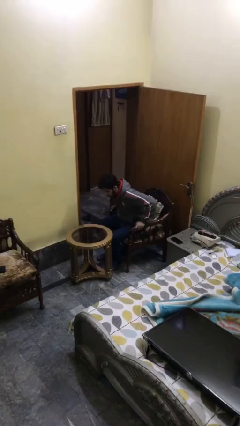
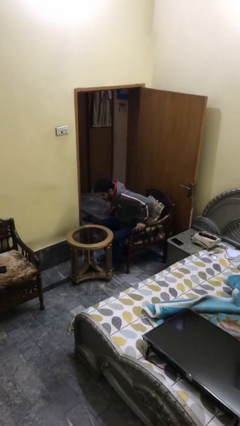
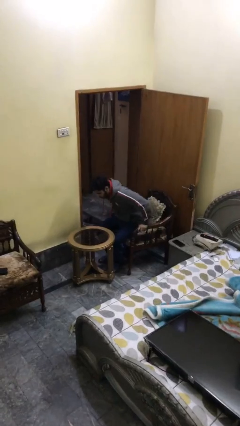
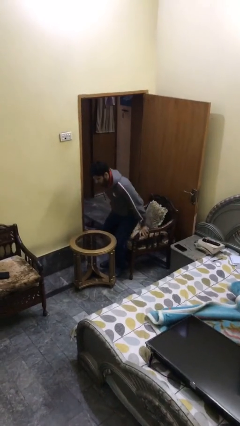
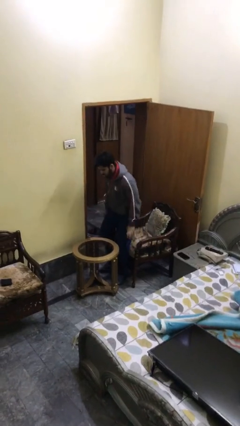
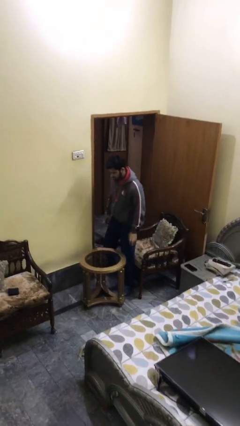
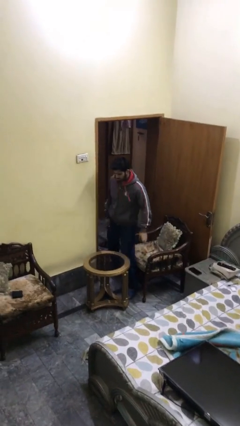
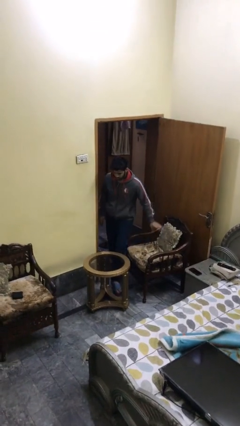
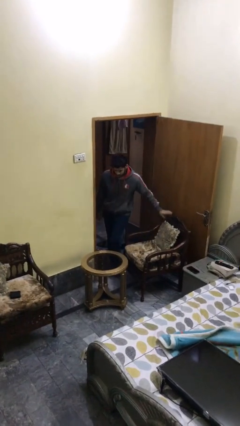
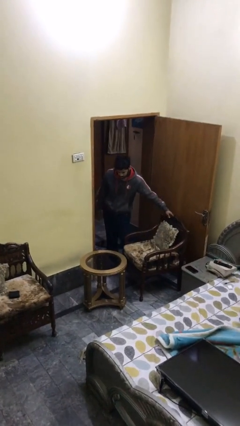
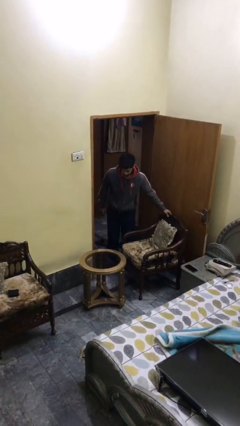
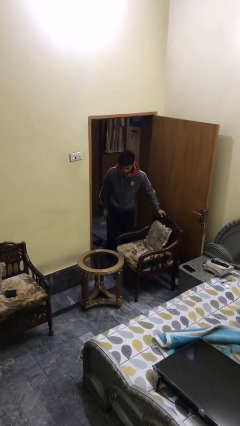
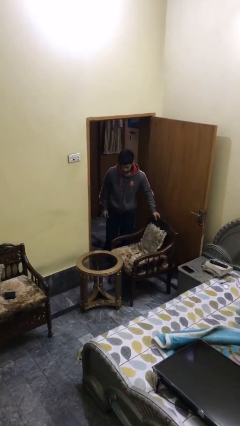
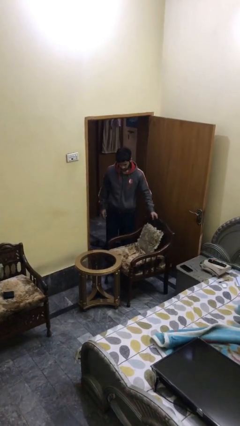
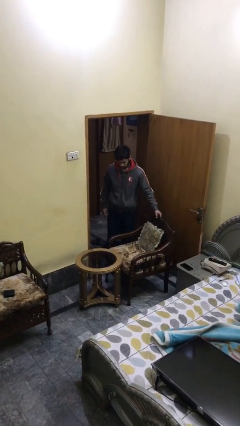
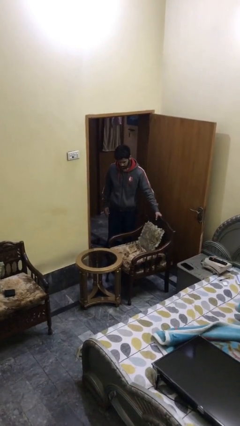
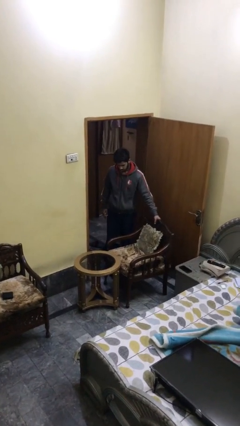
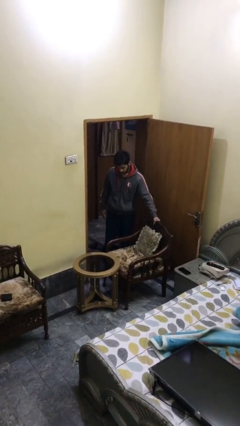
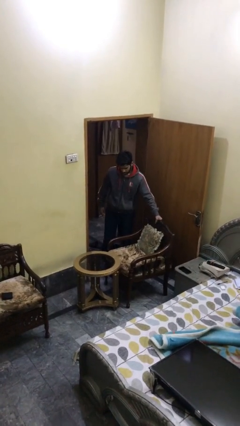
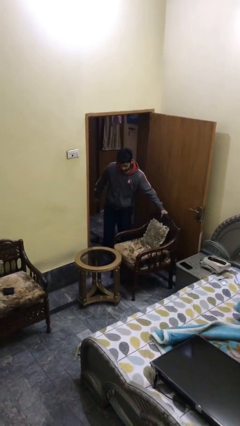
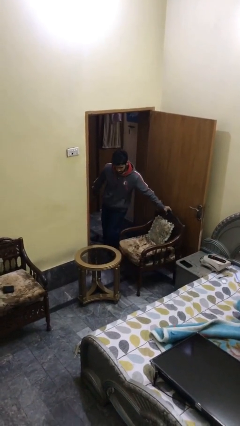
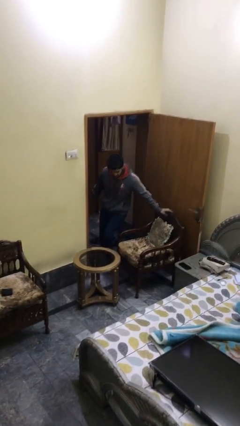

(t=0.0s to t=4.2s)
person stands up

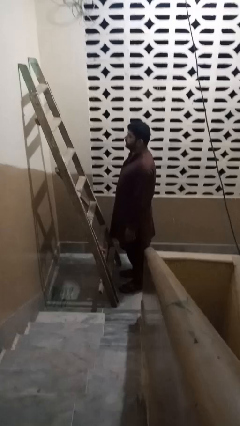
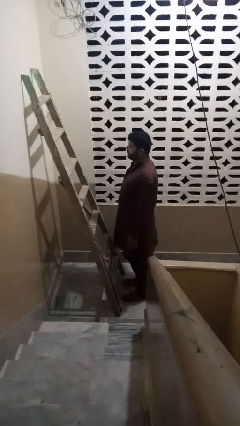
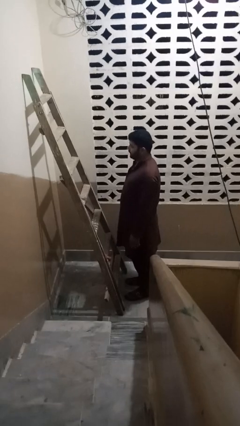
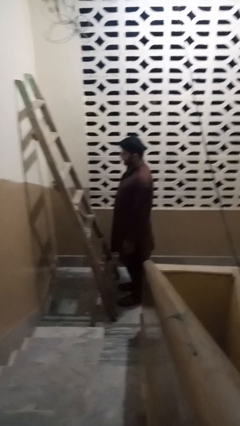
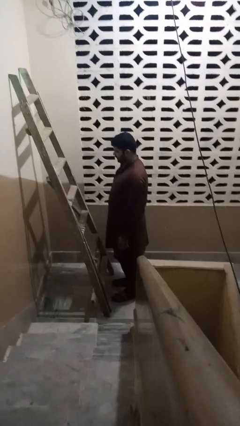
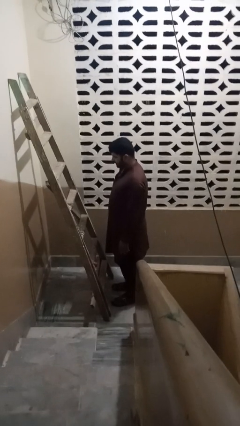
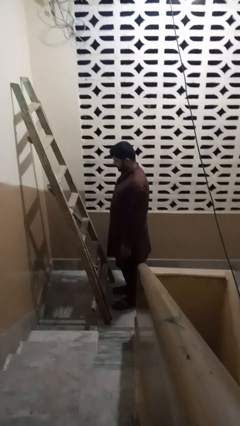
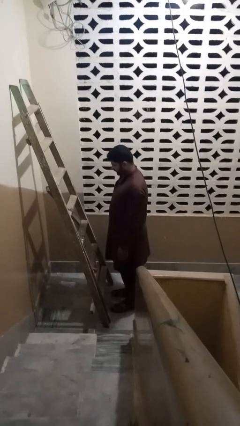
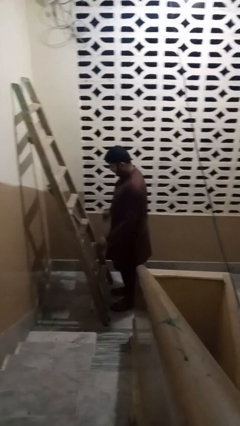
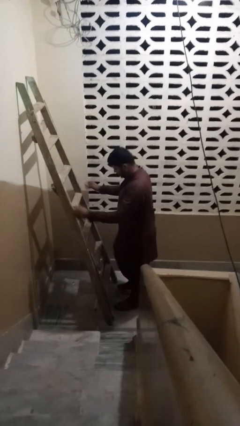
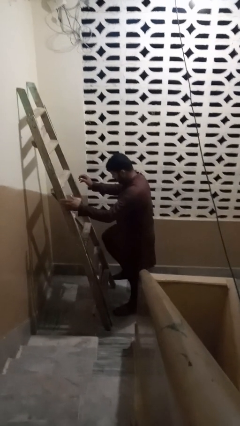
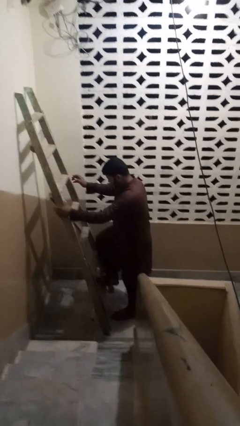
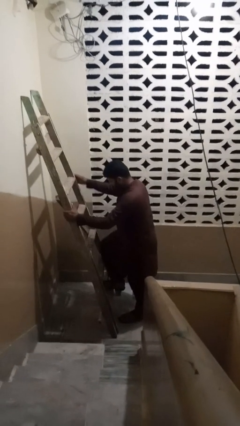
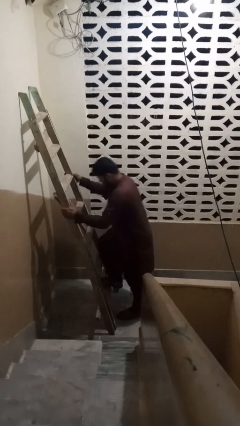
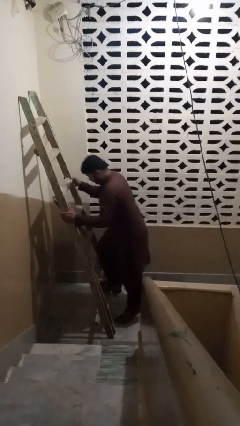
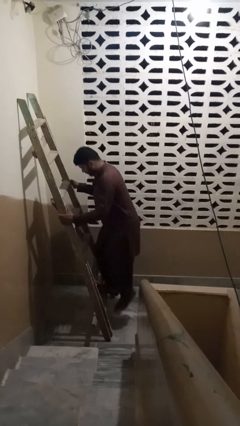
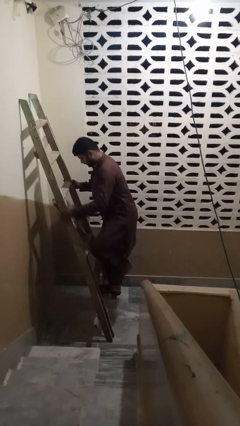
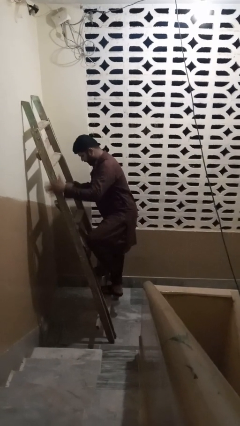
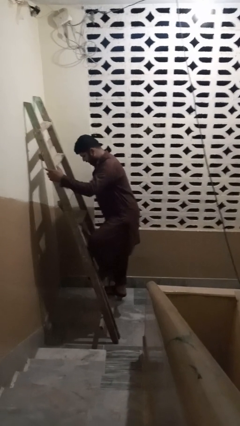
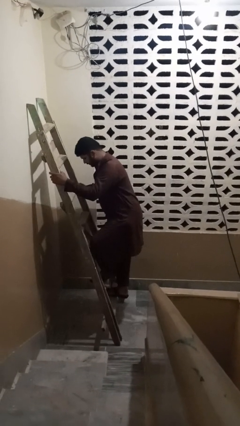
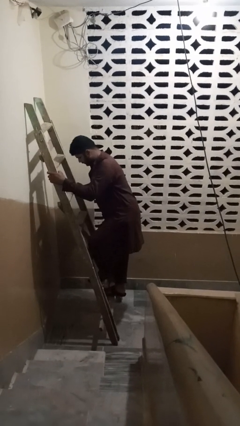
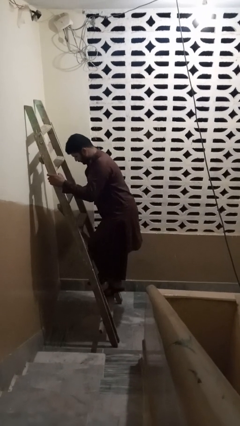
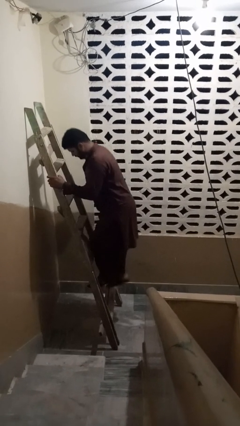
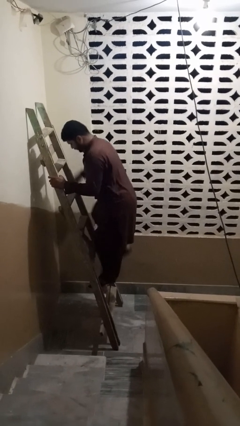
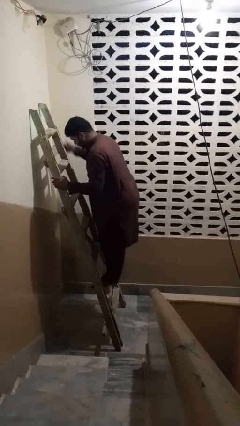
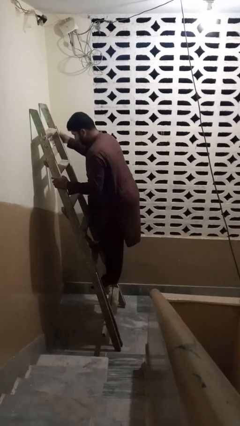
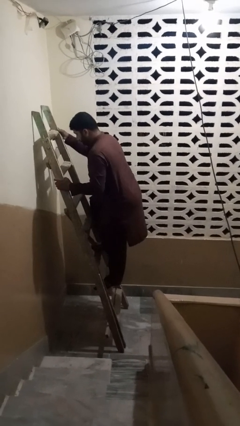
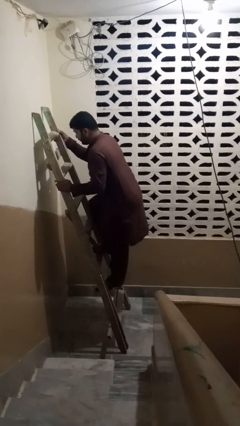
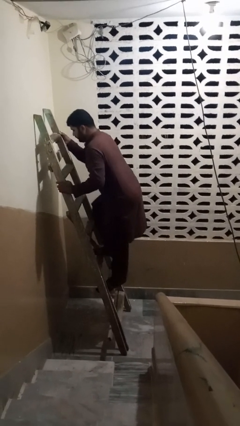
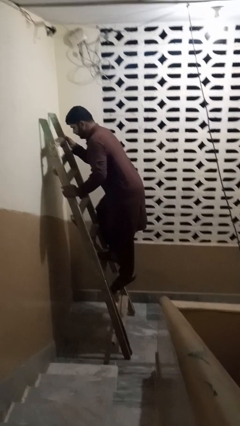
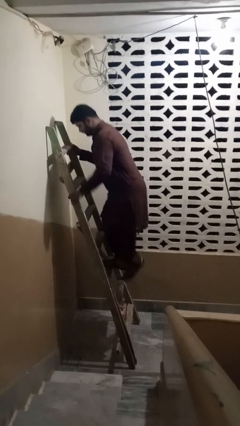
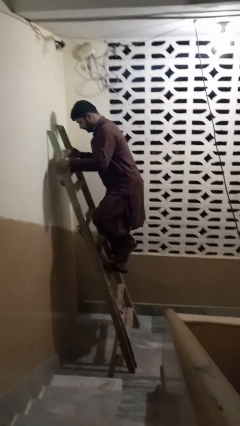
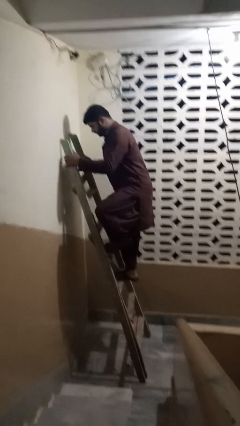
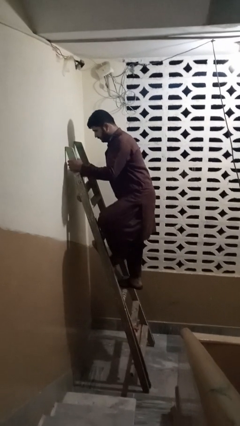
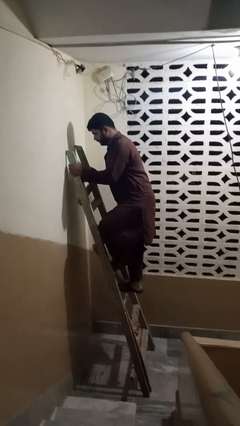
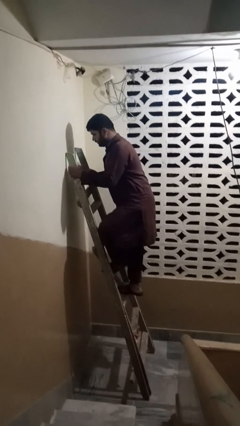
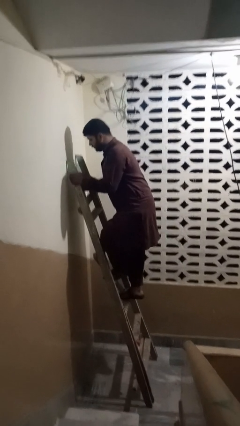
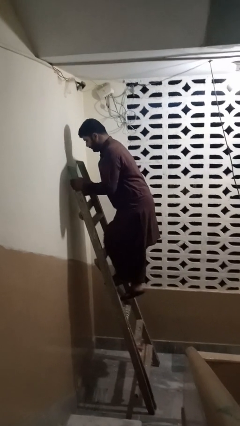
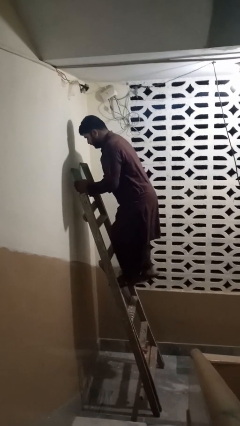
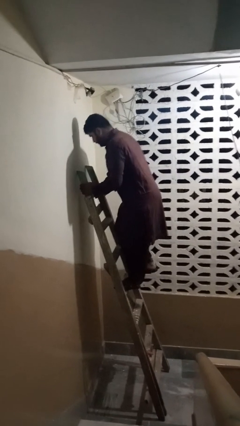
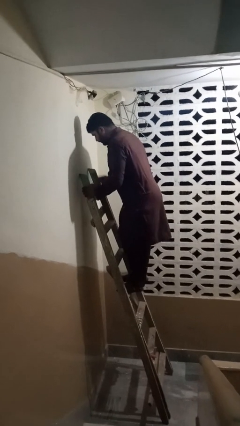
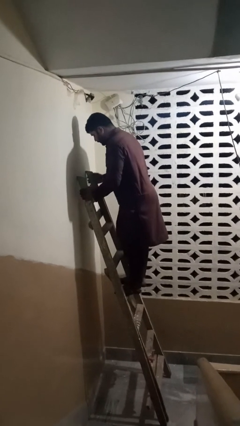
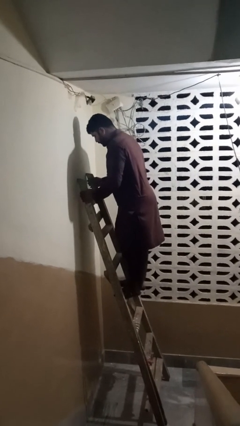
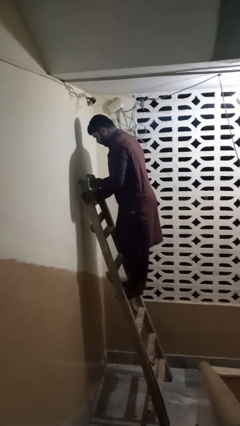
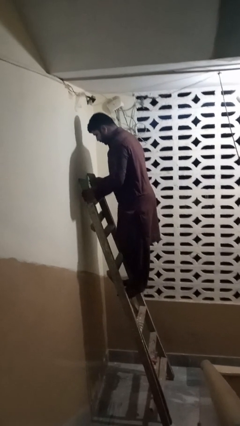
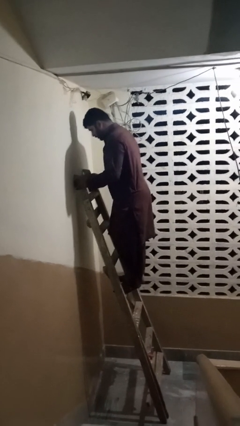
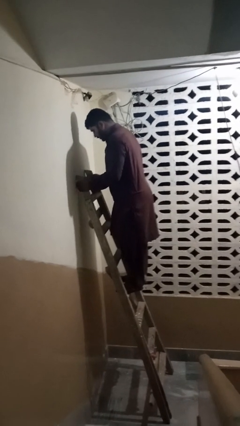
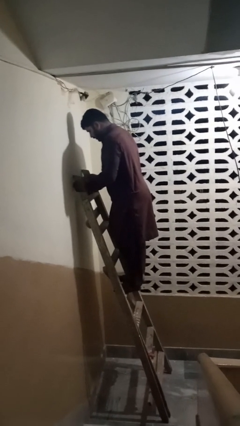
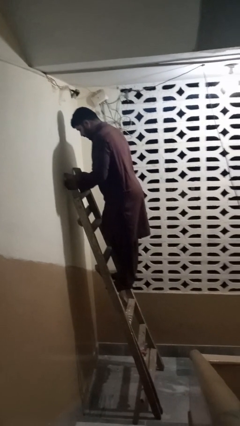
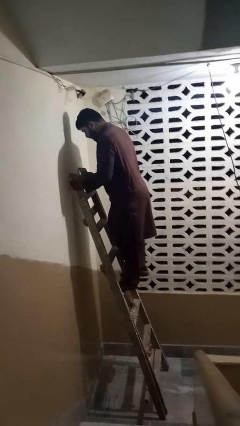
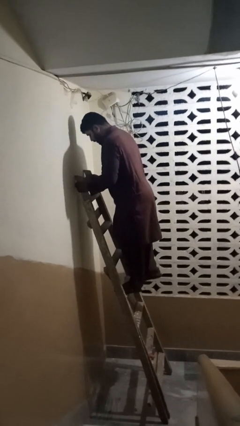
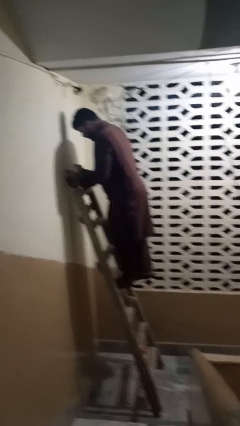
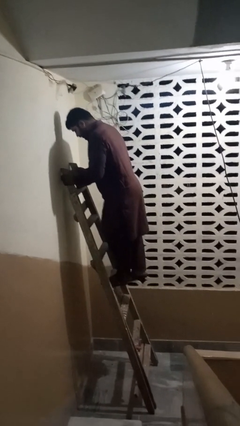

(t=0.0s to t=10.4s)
person climbs up ladder

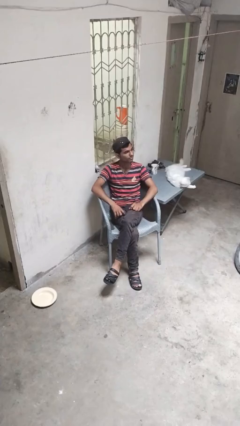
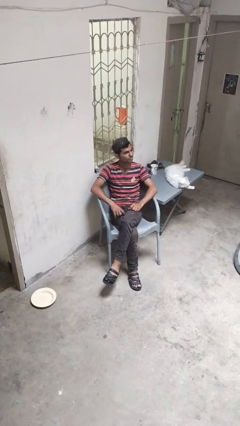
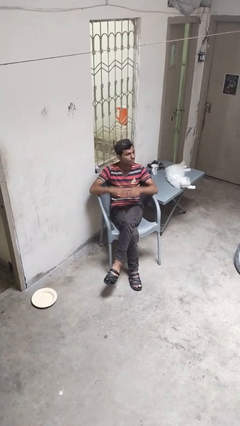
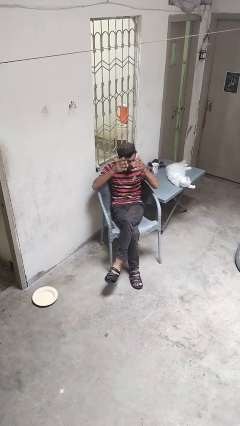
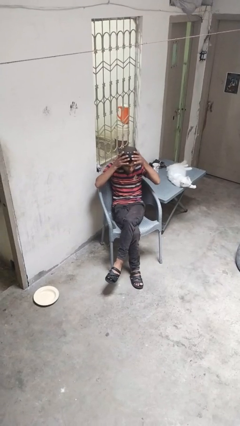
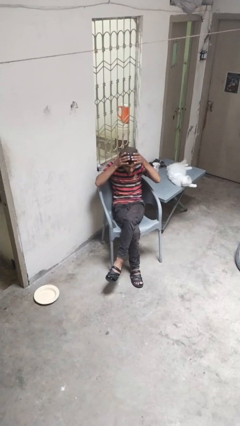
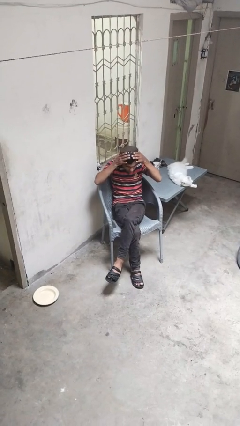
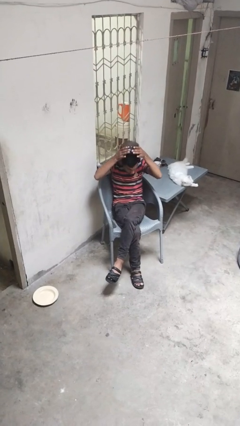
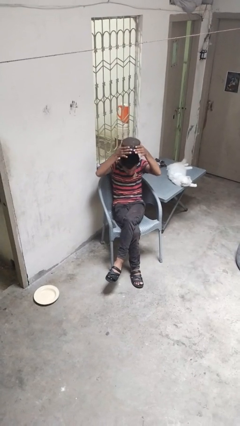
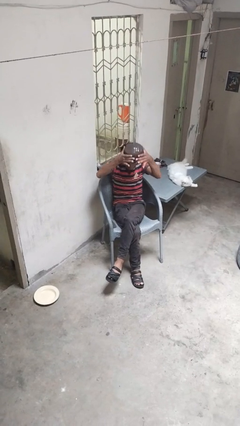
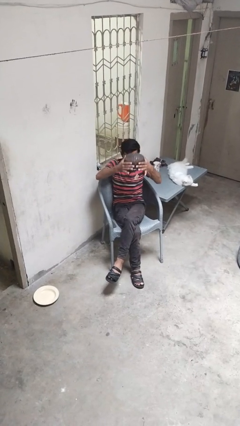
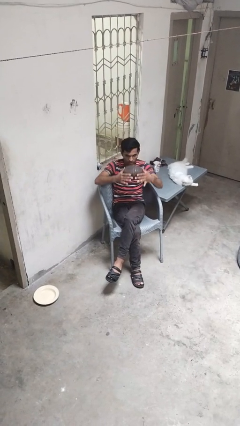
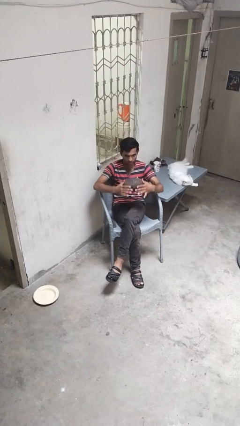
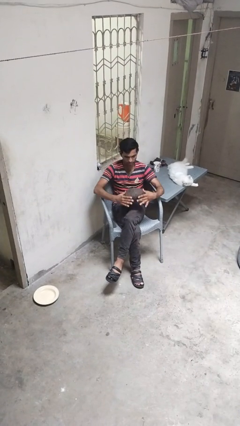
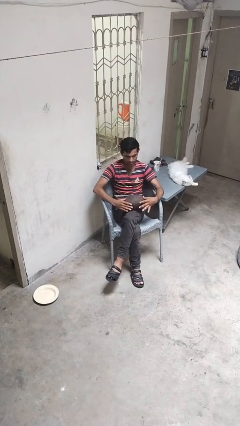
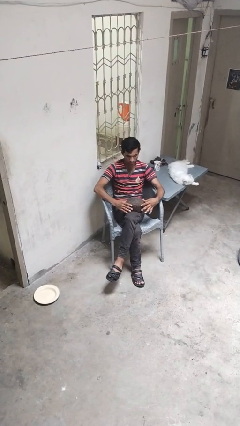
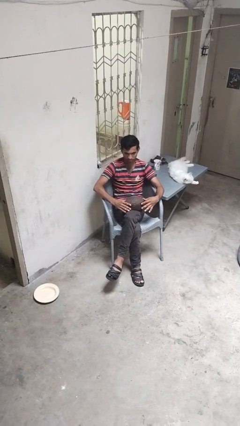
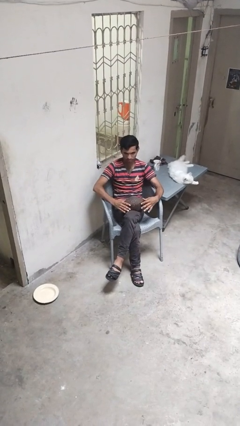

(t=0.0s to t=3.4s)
person takes off hat
